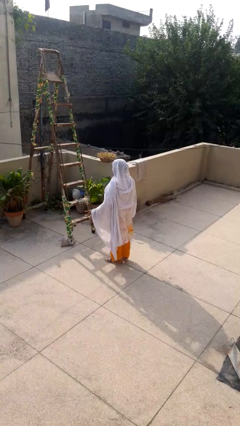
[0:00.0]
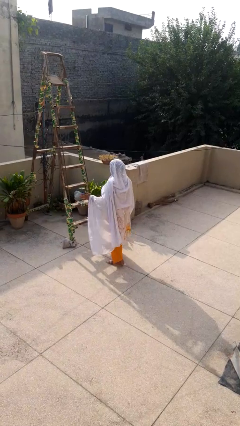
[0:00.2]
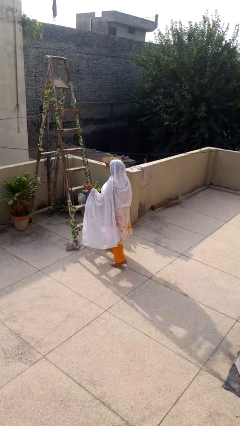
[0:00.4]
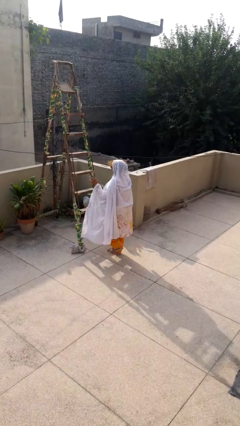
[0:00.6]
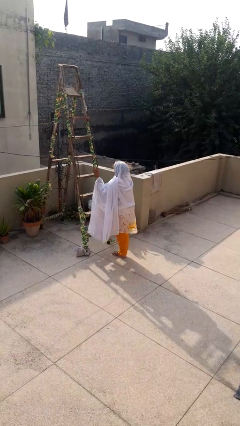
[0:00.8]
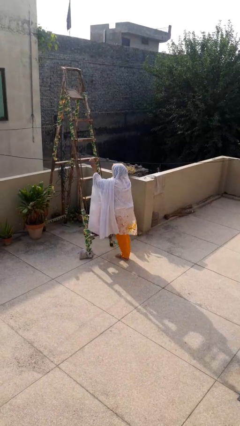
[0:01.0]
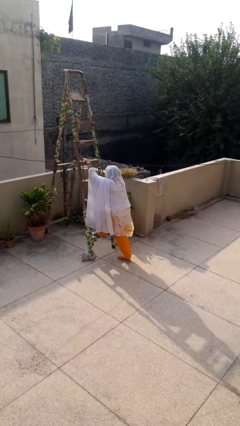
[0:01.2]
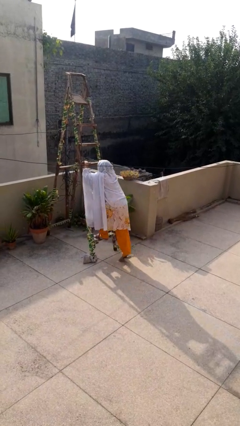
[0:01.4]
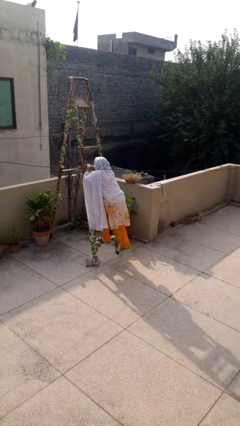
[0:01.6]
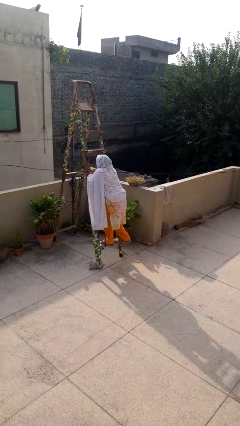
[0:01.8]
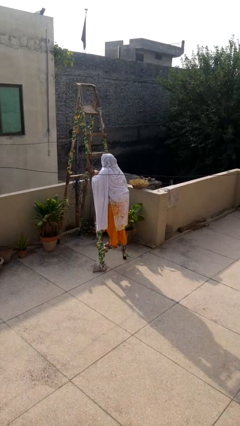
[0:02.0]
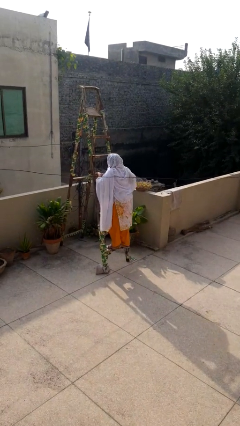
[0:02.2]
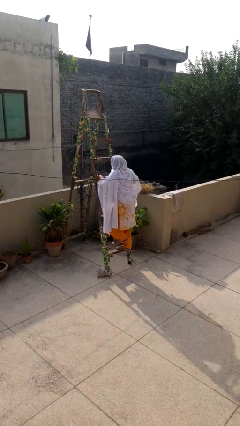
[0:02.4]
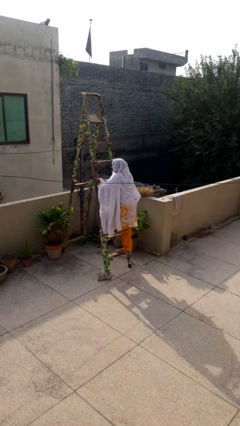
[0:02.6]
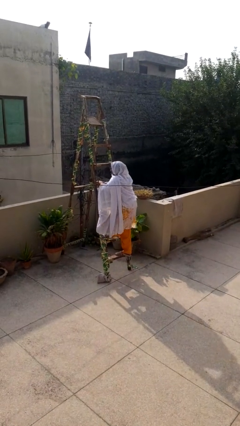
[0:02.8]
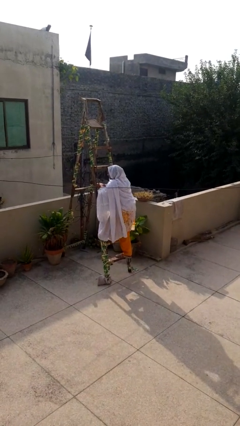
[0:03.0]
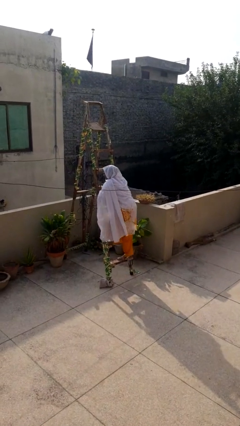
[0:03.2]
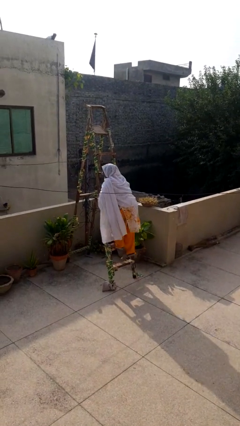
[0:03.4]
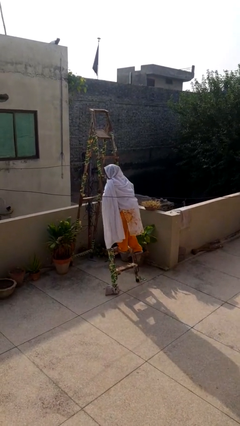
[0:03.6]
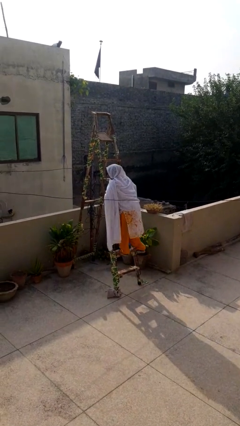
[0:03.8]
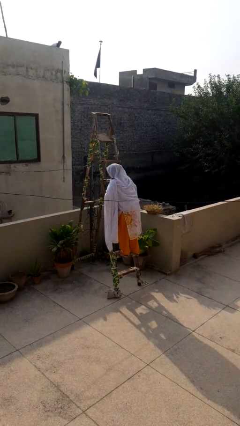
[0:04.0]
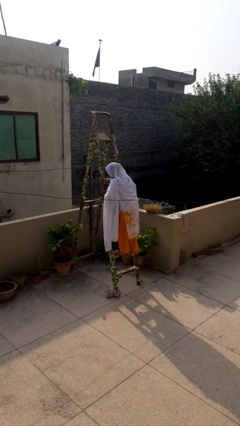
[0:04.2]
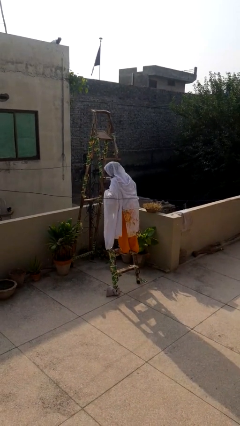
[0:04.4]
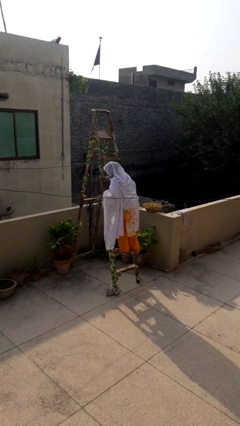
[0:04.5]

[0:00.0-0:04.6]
person climbs up ladder

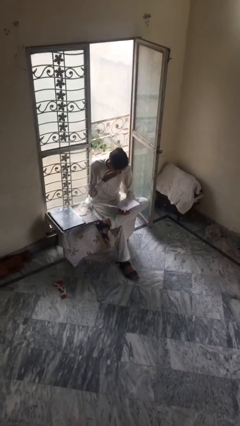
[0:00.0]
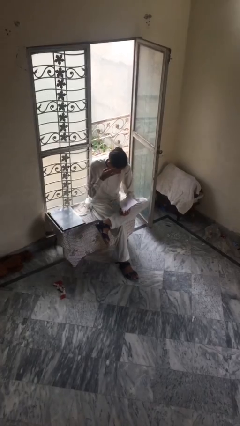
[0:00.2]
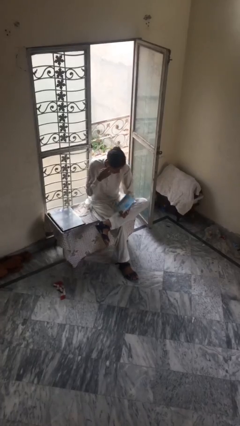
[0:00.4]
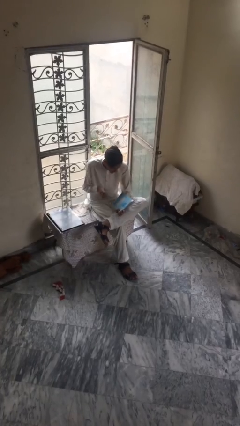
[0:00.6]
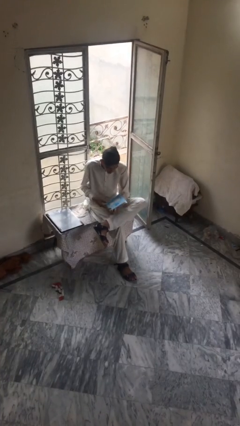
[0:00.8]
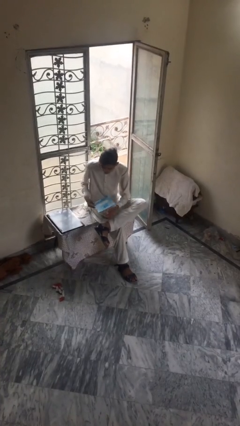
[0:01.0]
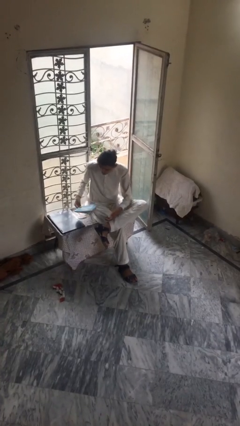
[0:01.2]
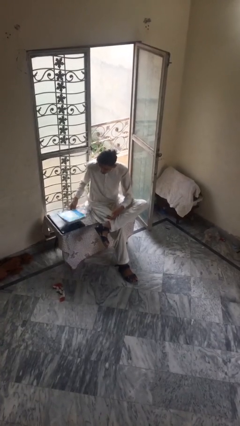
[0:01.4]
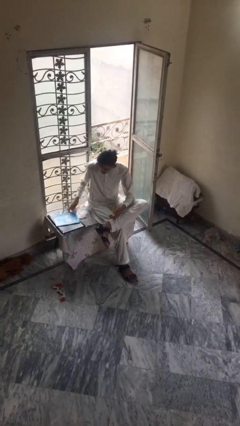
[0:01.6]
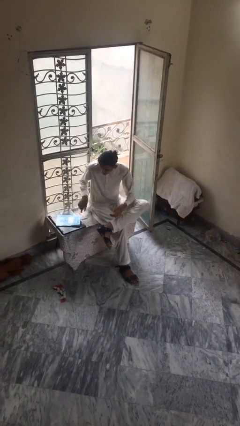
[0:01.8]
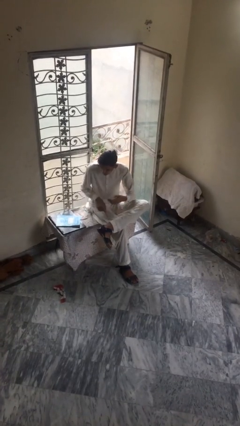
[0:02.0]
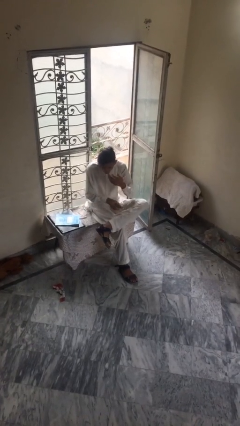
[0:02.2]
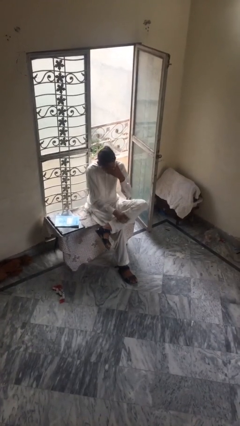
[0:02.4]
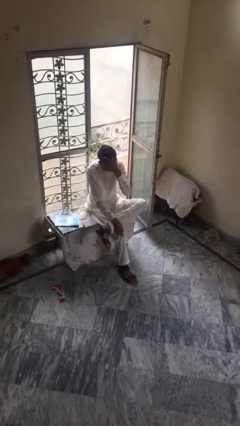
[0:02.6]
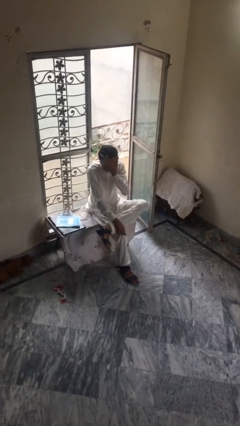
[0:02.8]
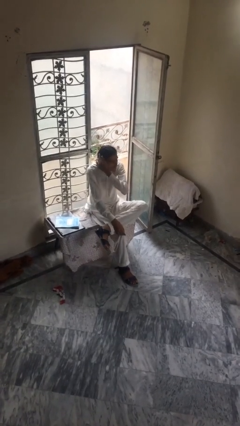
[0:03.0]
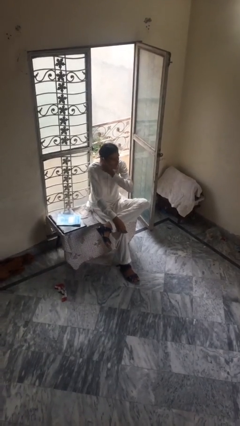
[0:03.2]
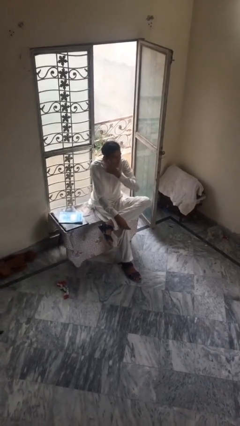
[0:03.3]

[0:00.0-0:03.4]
person puts down object on table

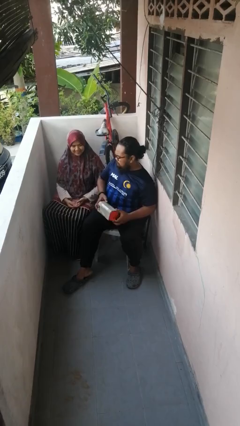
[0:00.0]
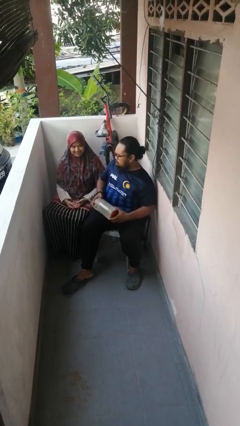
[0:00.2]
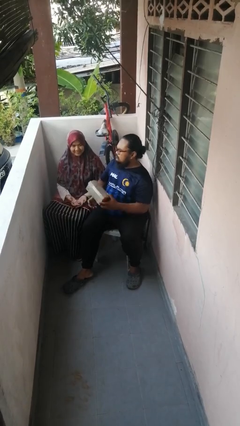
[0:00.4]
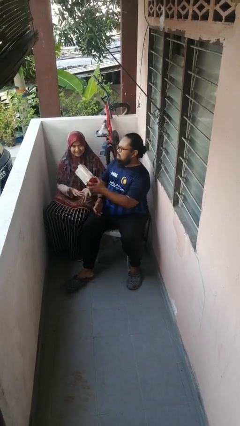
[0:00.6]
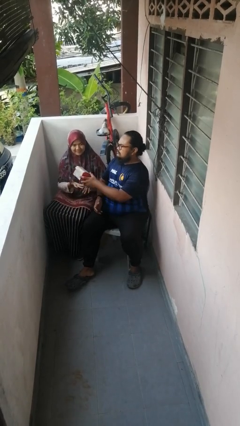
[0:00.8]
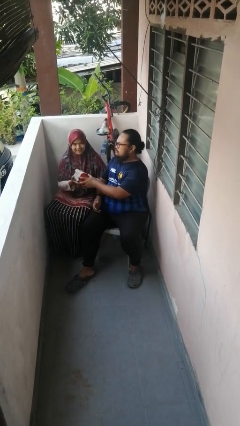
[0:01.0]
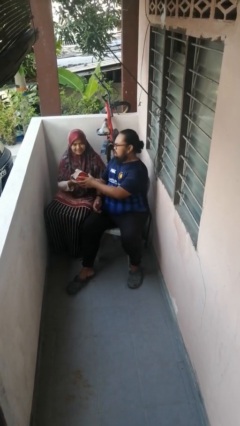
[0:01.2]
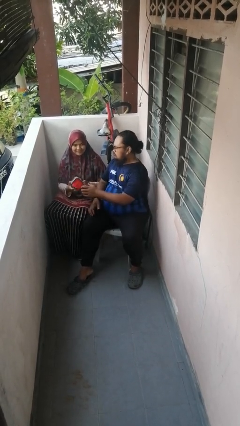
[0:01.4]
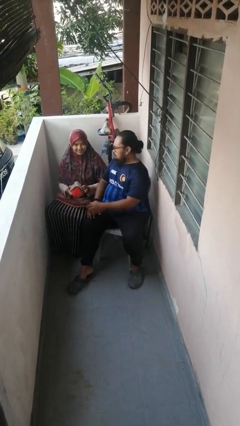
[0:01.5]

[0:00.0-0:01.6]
person transfers object to person

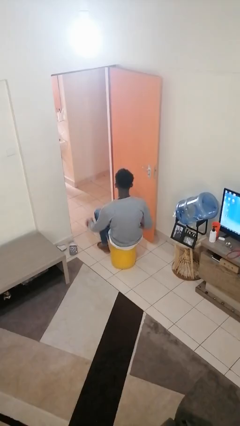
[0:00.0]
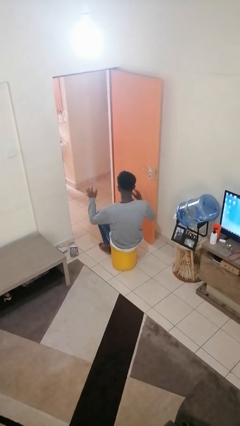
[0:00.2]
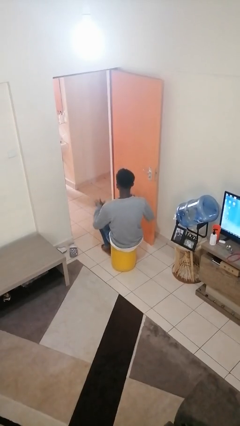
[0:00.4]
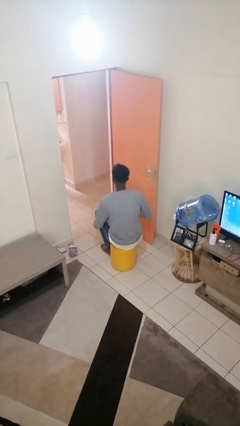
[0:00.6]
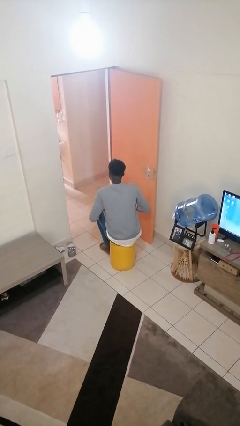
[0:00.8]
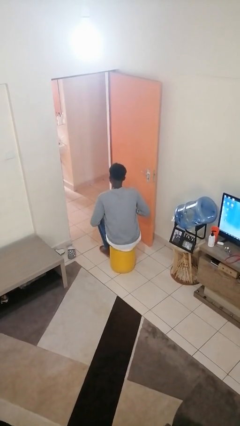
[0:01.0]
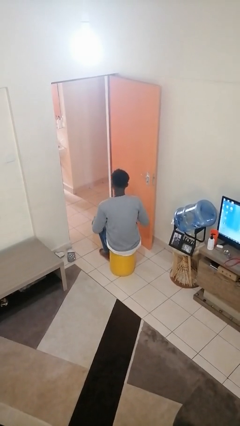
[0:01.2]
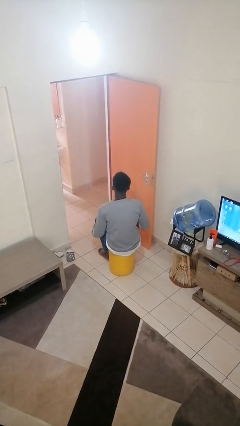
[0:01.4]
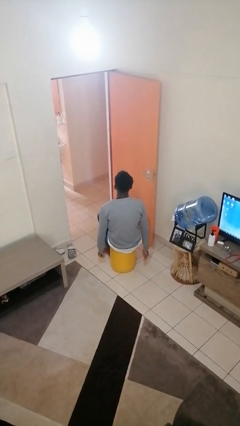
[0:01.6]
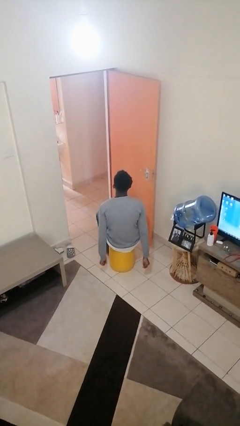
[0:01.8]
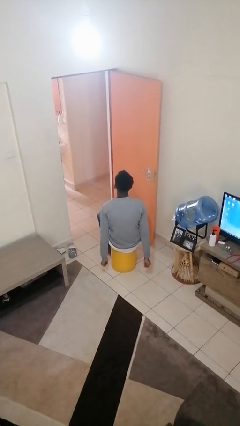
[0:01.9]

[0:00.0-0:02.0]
person slaps hands on thighs

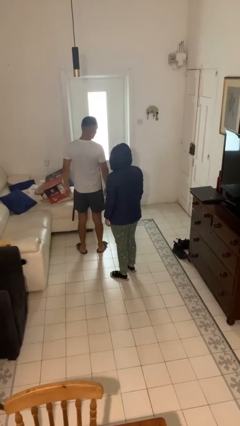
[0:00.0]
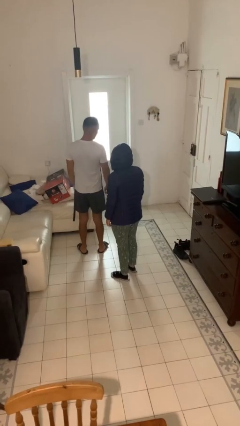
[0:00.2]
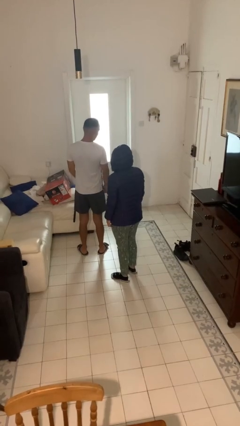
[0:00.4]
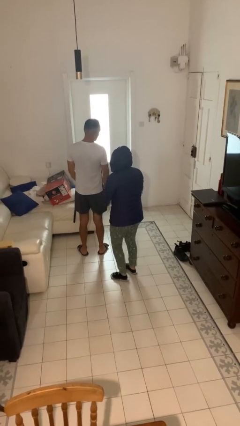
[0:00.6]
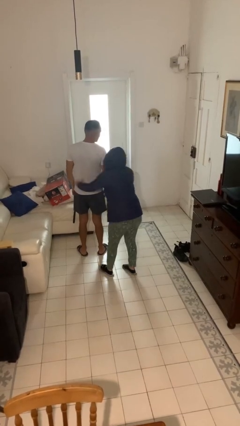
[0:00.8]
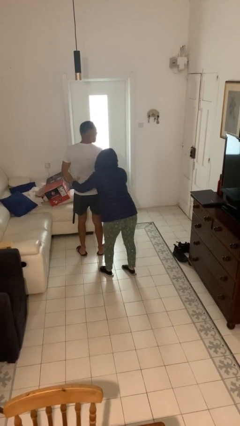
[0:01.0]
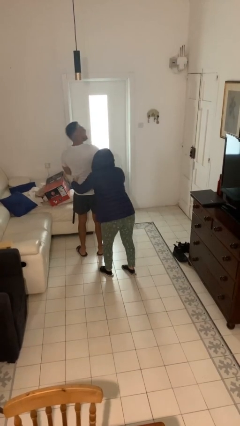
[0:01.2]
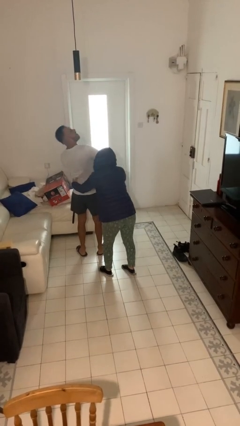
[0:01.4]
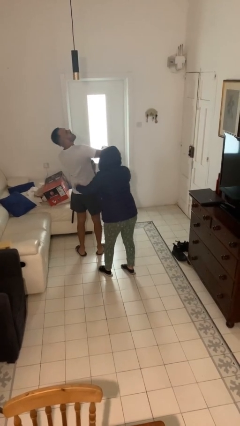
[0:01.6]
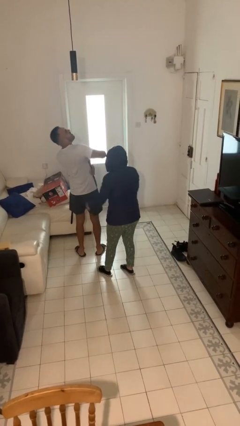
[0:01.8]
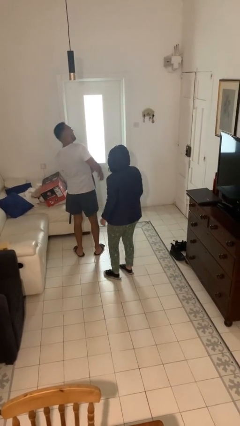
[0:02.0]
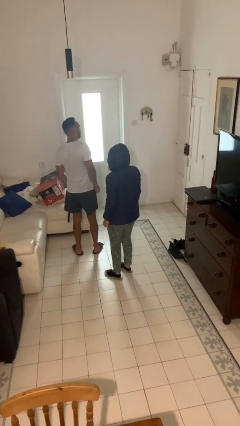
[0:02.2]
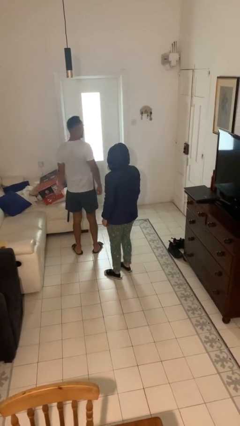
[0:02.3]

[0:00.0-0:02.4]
person tickles person

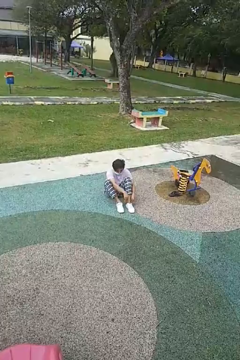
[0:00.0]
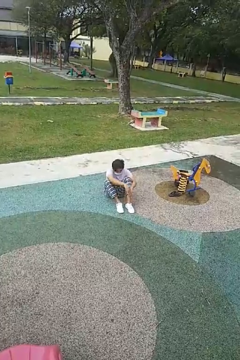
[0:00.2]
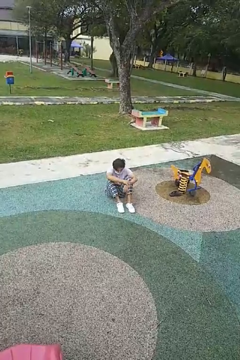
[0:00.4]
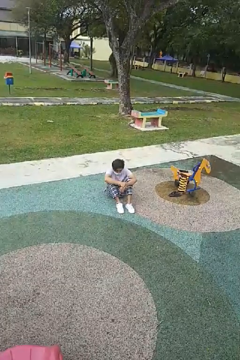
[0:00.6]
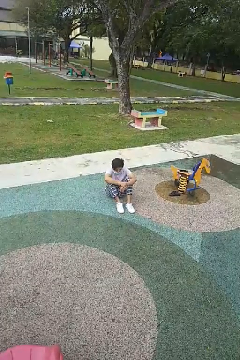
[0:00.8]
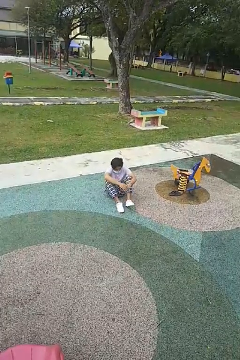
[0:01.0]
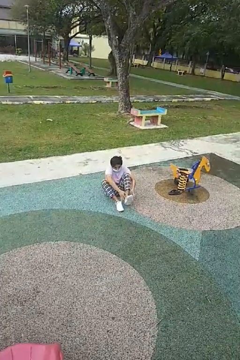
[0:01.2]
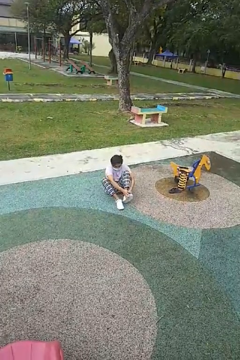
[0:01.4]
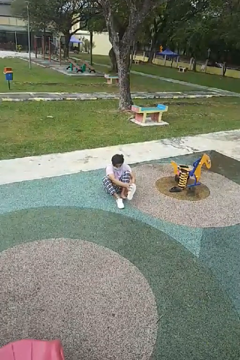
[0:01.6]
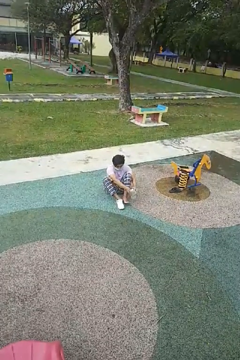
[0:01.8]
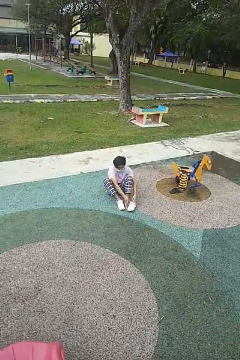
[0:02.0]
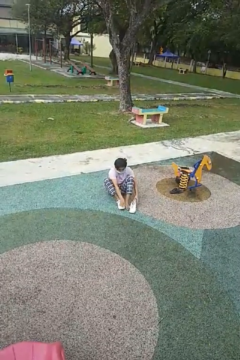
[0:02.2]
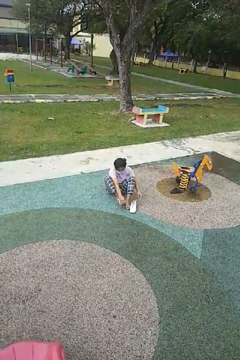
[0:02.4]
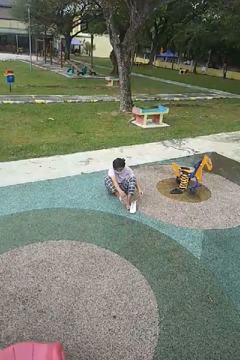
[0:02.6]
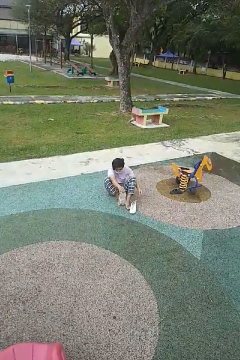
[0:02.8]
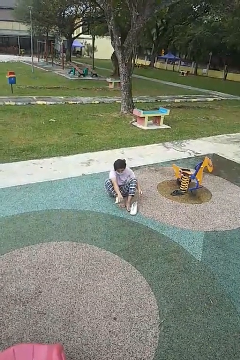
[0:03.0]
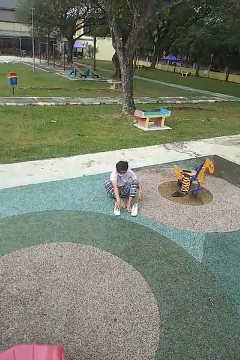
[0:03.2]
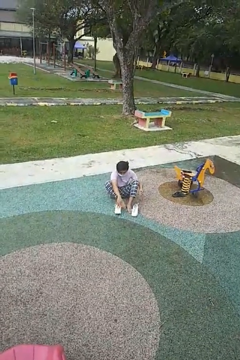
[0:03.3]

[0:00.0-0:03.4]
person takes off shoes

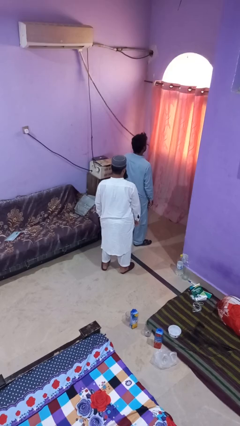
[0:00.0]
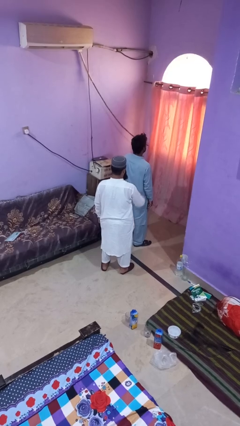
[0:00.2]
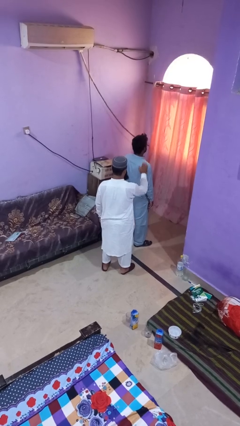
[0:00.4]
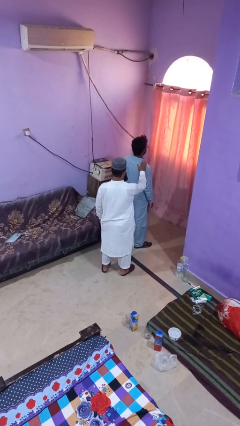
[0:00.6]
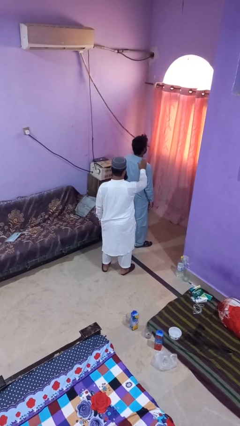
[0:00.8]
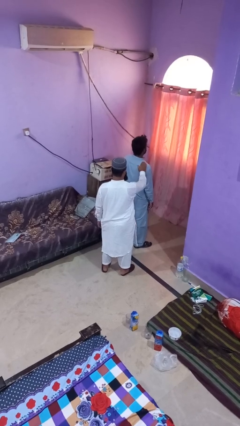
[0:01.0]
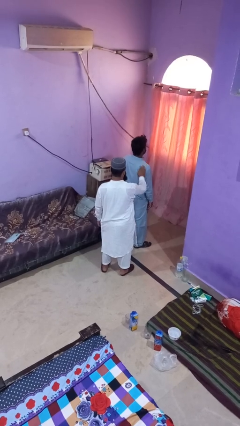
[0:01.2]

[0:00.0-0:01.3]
person pounds shoulders of person
